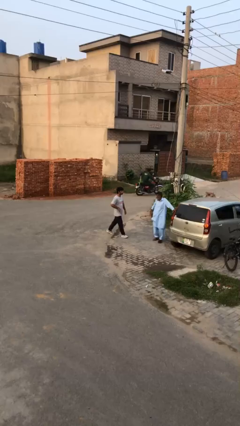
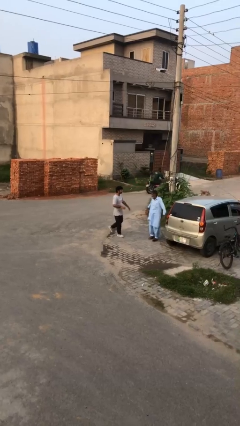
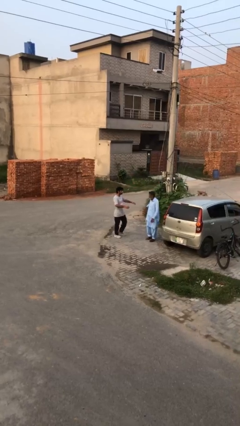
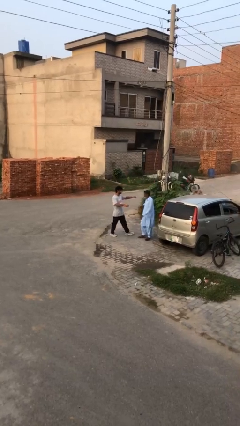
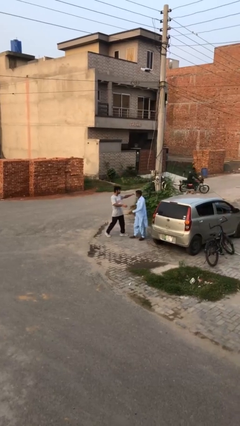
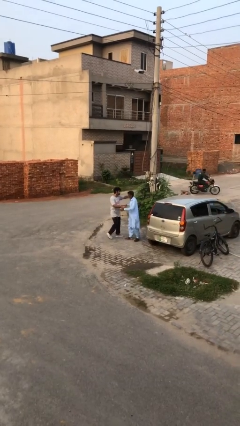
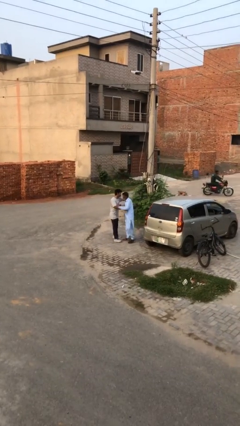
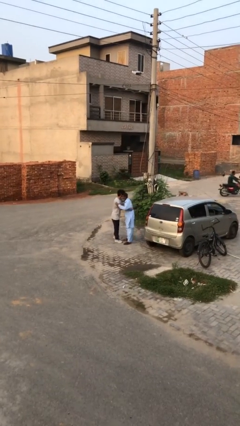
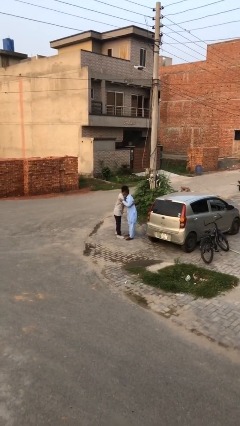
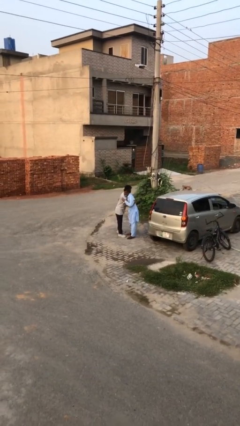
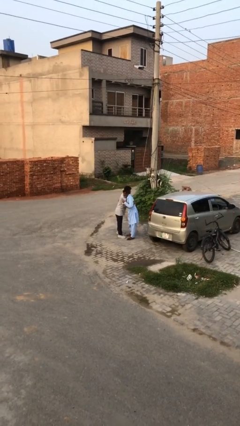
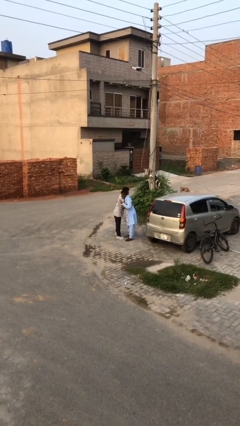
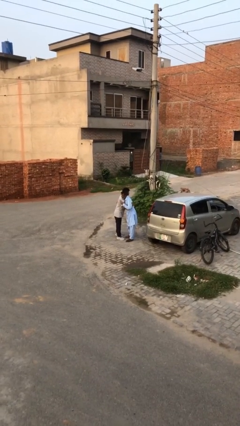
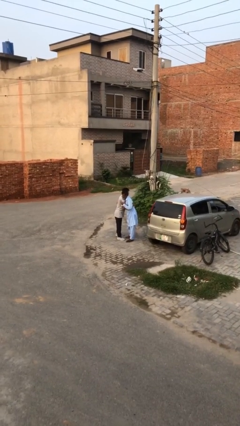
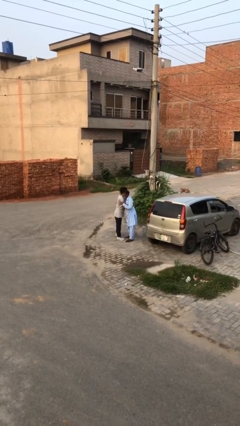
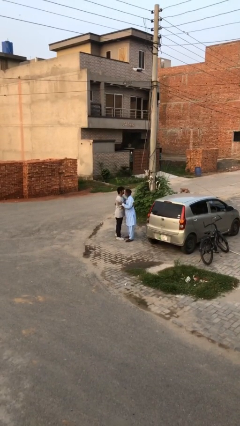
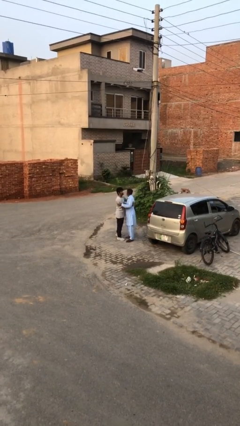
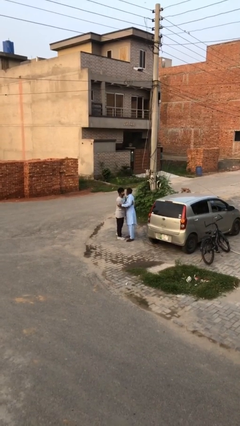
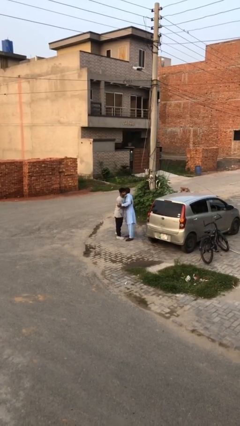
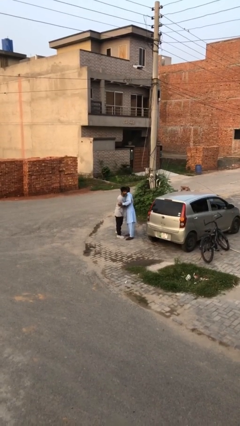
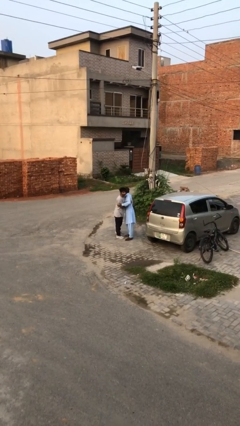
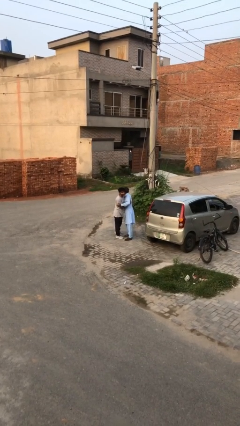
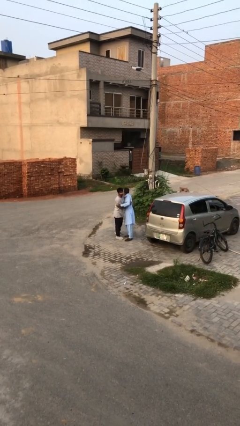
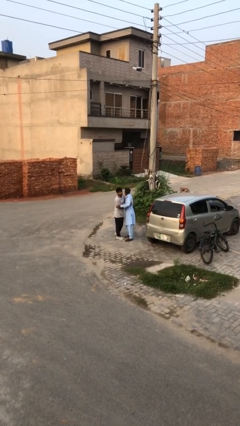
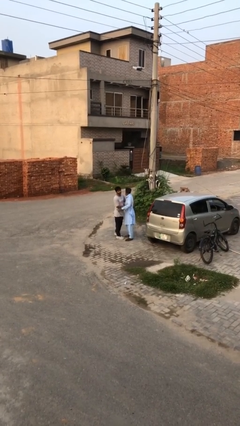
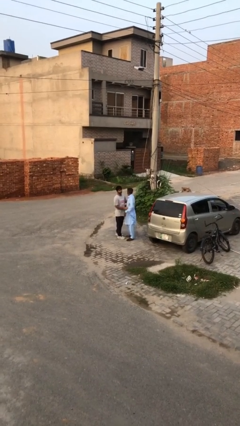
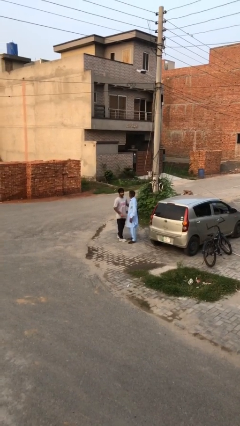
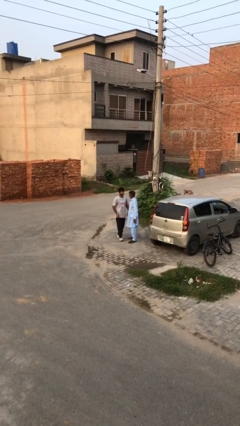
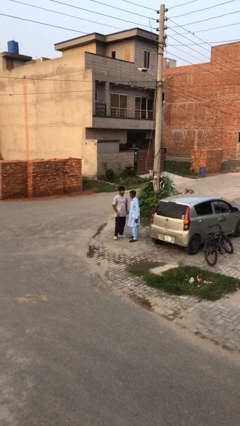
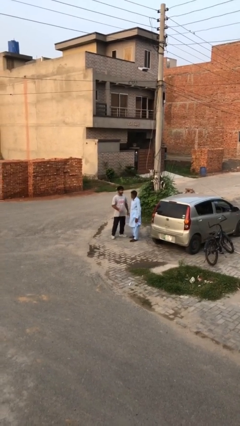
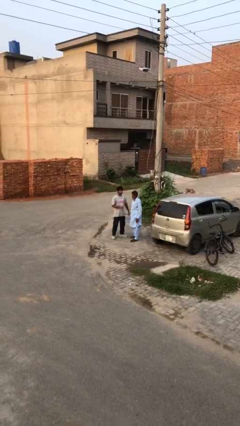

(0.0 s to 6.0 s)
person embraces person

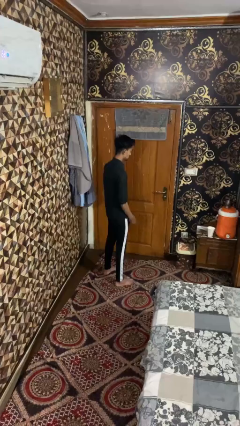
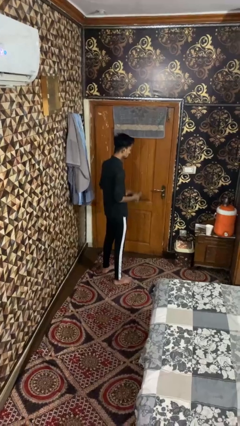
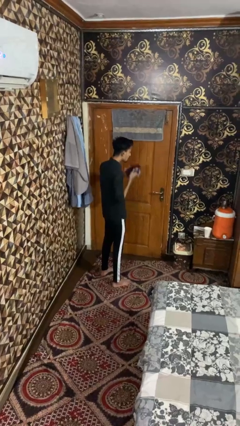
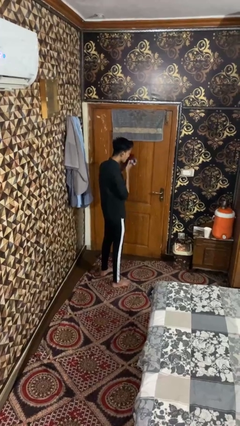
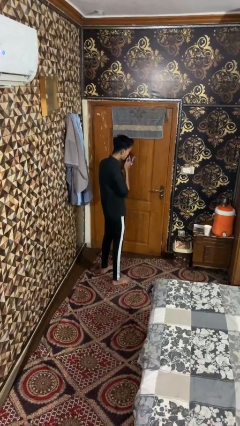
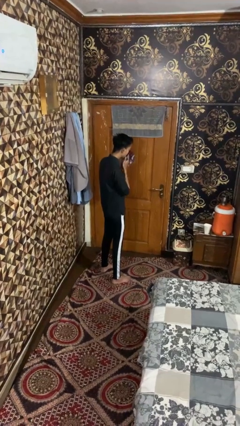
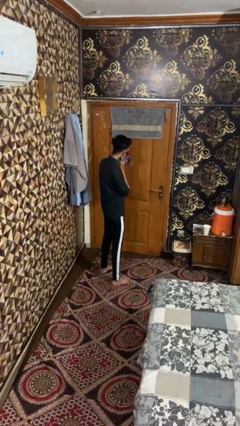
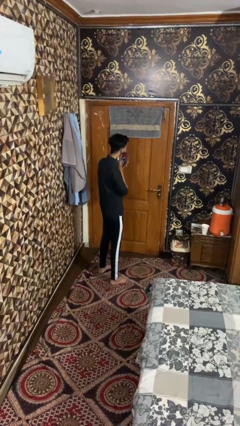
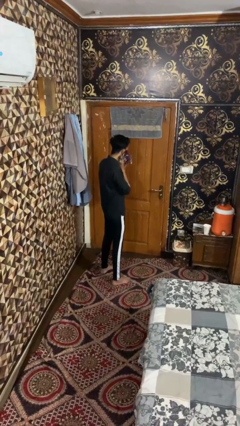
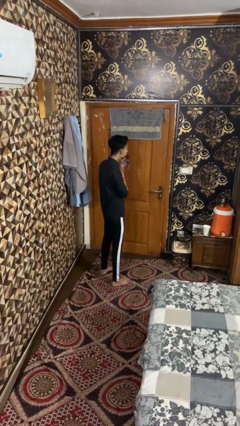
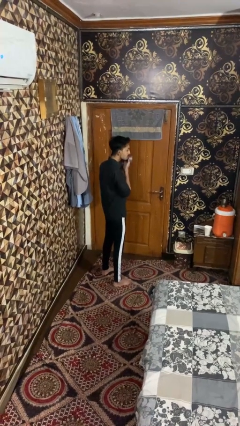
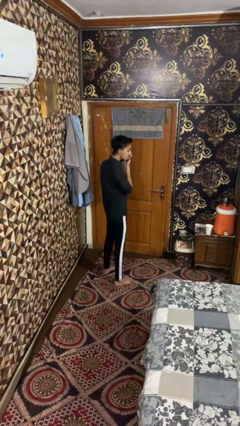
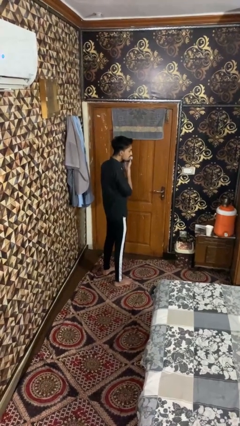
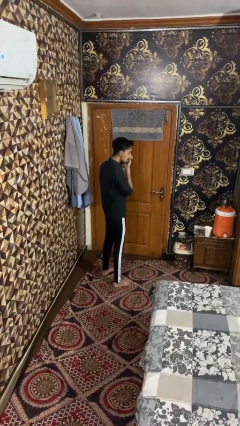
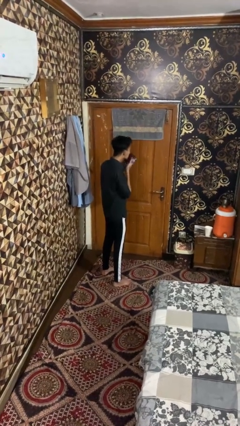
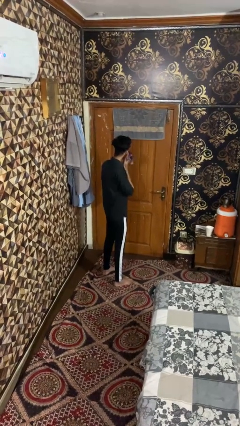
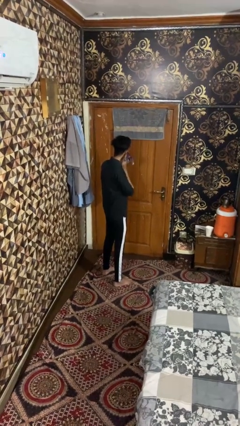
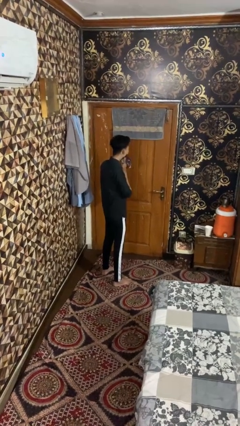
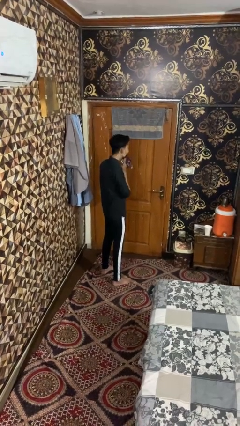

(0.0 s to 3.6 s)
person wipes mouth with napkin

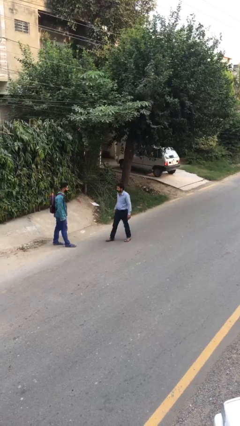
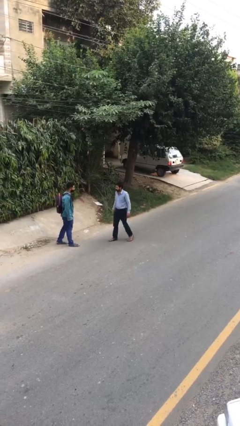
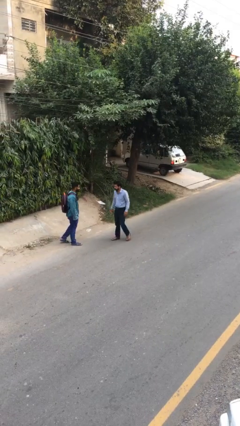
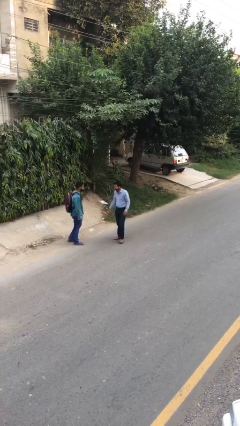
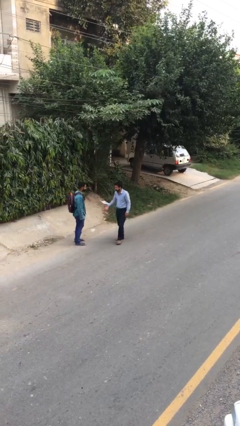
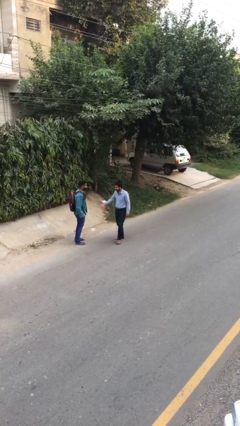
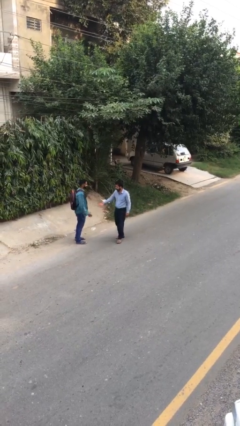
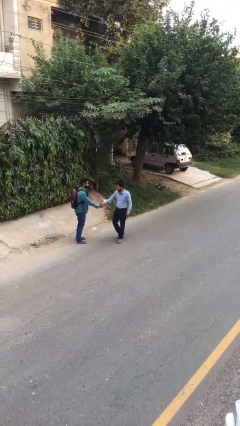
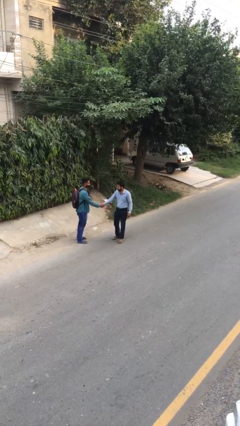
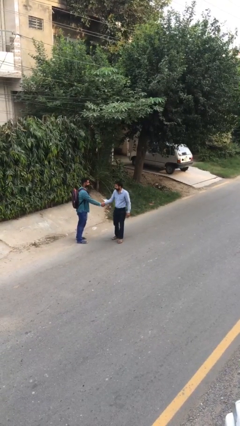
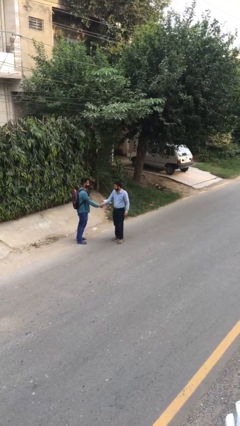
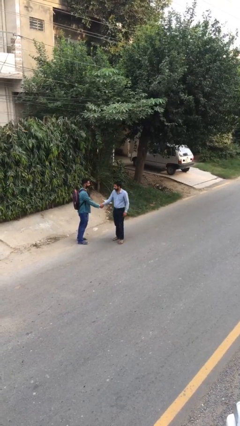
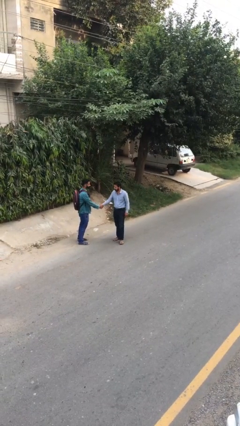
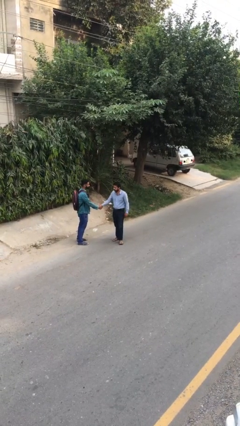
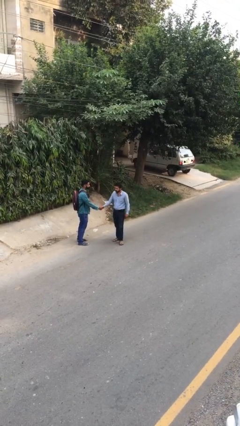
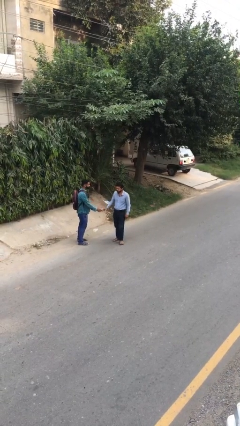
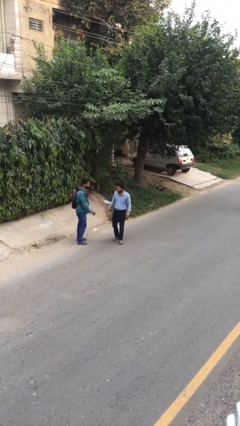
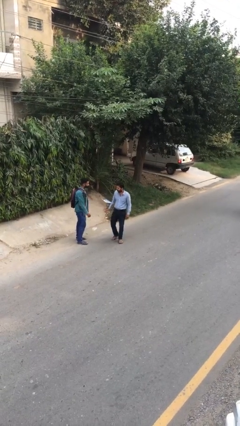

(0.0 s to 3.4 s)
person shakes hand

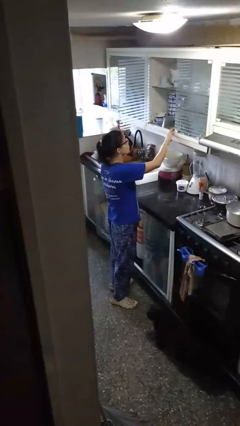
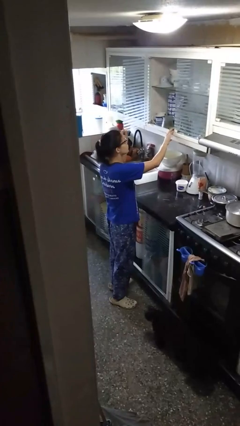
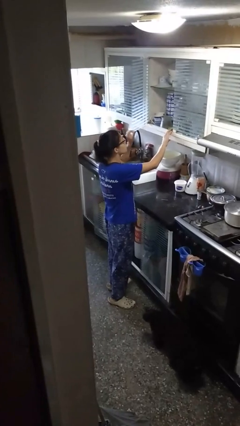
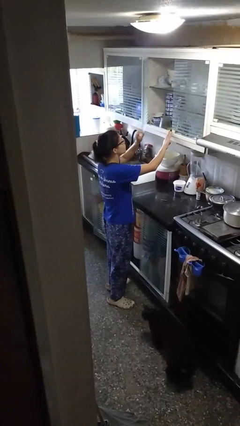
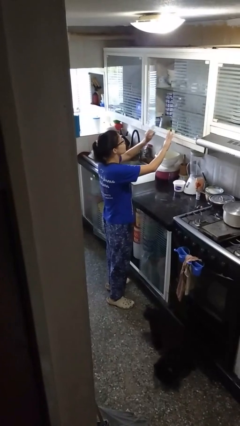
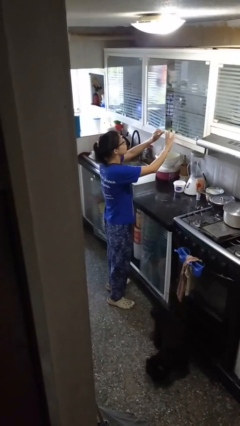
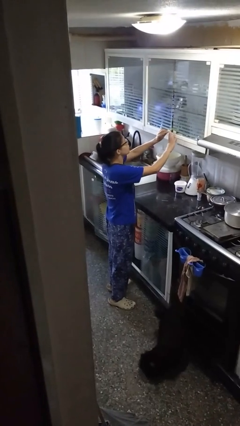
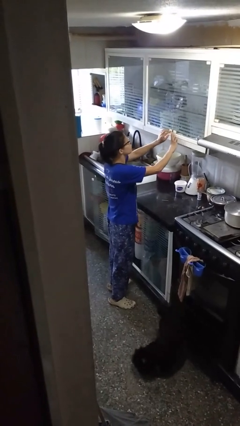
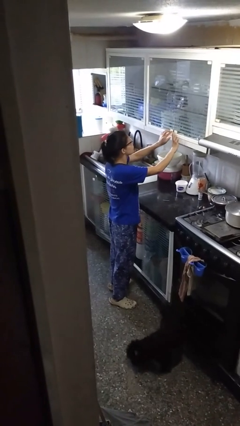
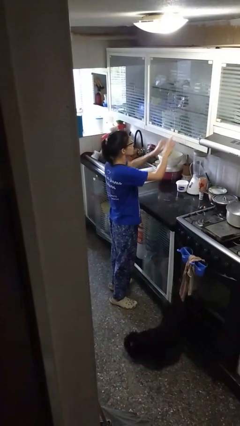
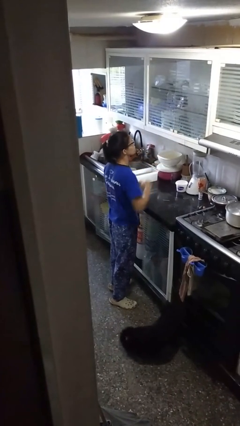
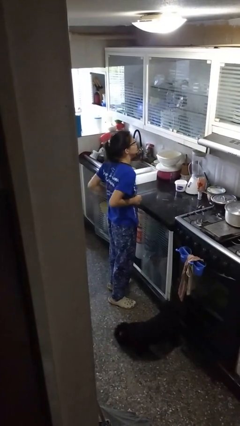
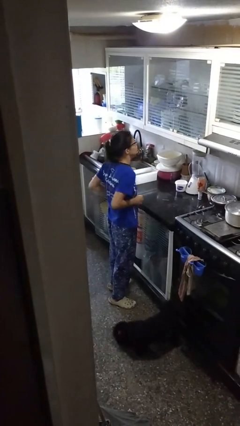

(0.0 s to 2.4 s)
person closes cabinet

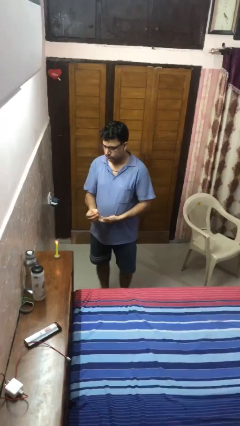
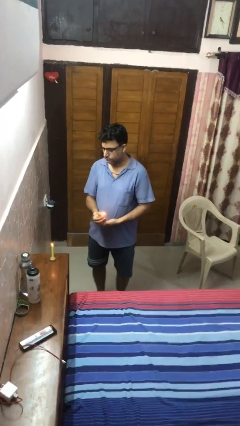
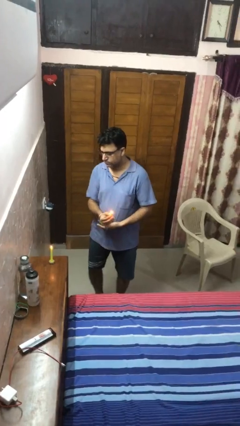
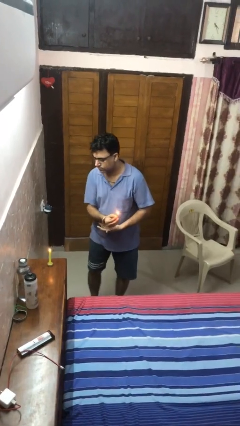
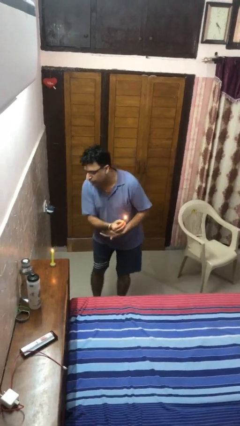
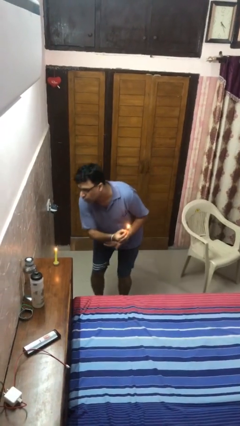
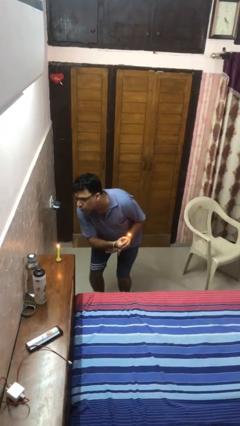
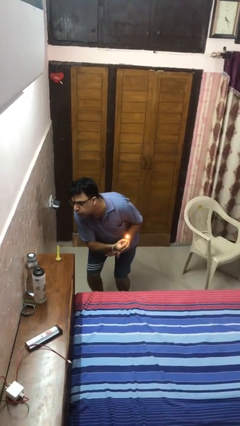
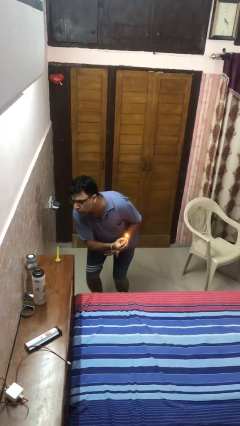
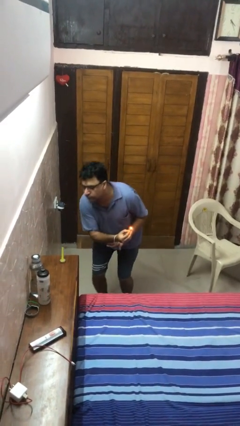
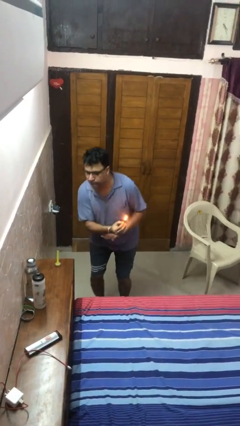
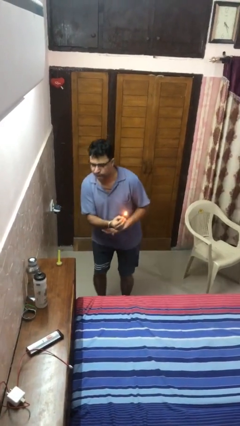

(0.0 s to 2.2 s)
person extinguishes candle

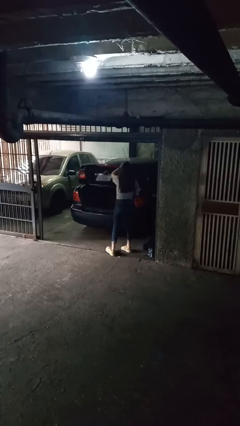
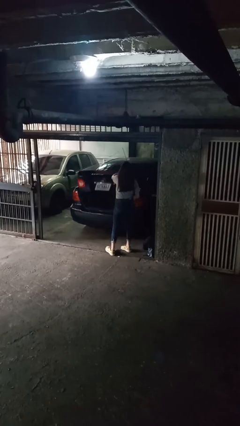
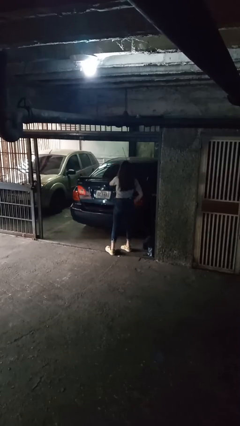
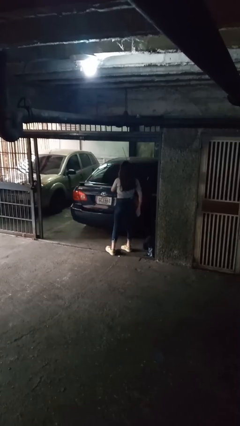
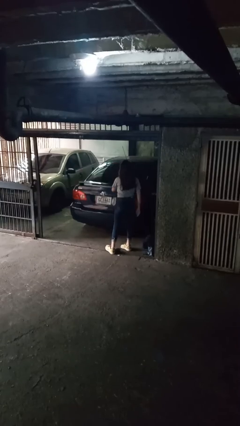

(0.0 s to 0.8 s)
person closes car trunk
